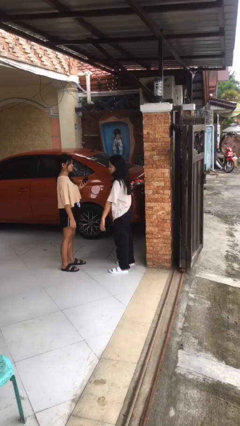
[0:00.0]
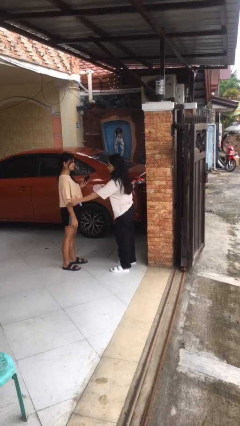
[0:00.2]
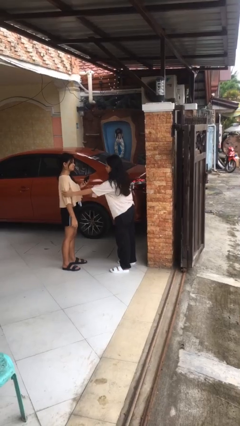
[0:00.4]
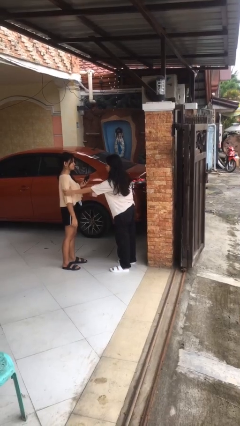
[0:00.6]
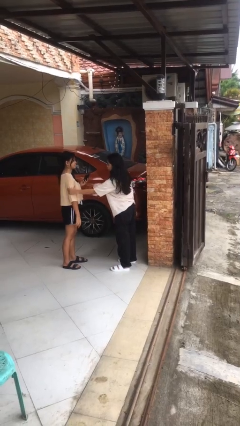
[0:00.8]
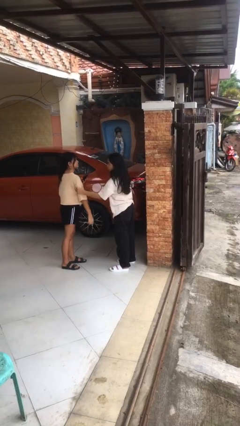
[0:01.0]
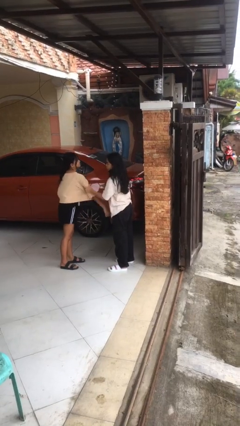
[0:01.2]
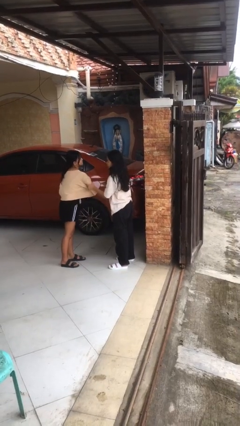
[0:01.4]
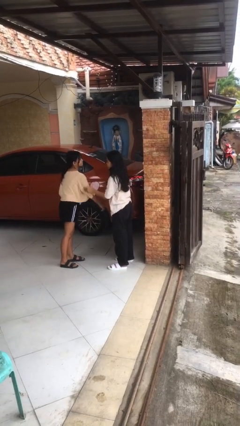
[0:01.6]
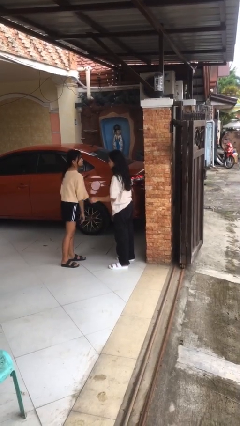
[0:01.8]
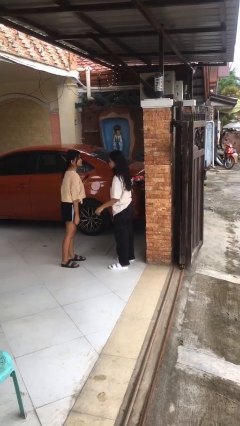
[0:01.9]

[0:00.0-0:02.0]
person grabs person by bicep

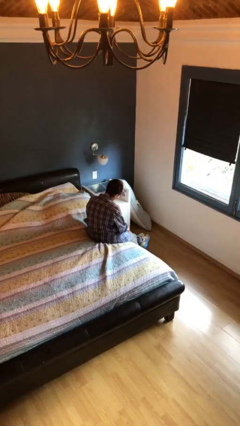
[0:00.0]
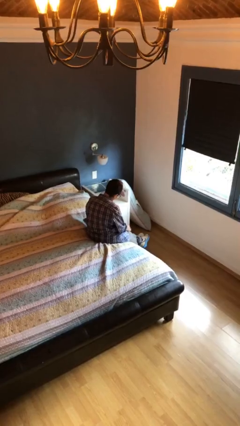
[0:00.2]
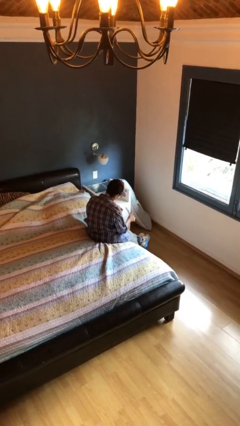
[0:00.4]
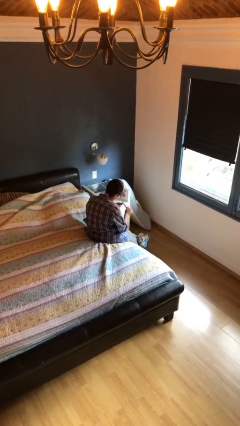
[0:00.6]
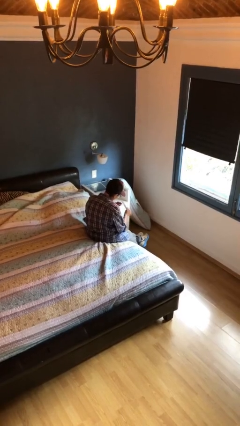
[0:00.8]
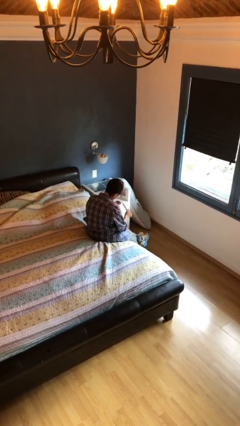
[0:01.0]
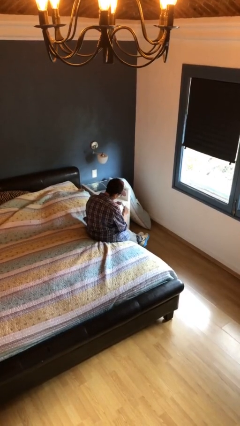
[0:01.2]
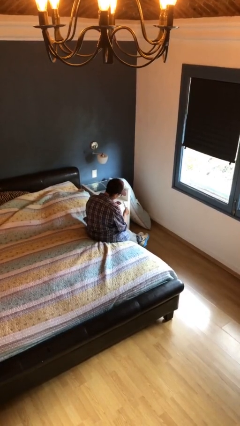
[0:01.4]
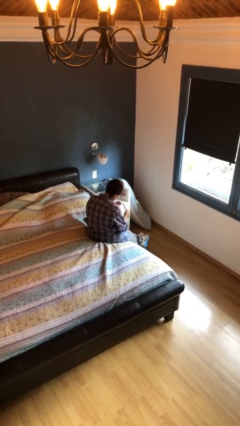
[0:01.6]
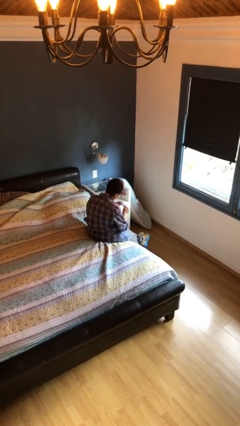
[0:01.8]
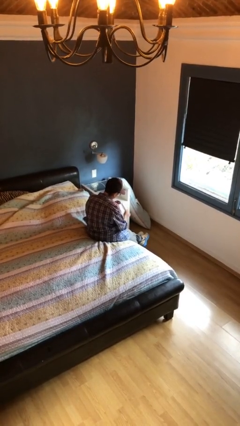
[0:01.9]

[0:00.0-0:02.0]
person files fingernails

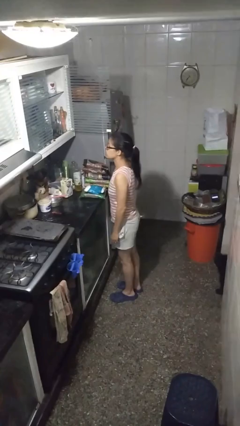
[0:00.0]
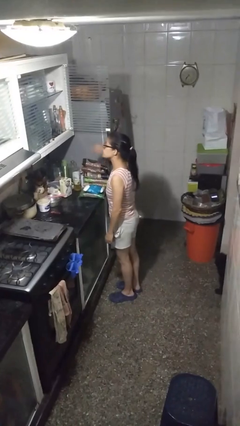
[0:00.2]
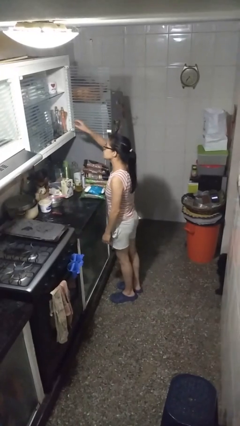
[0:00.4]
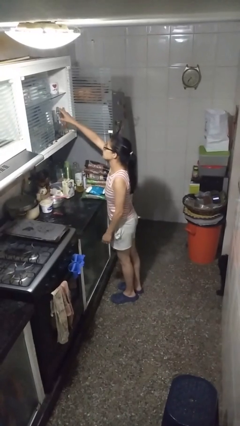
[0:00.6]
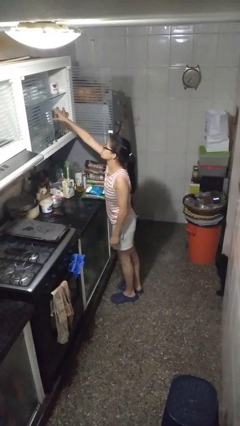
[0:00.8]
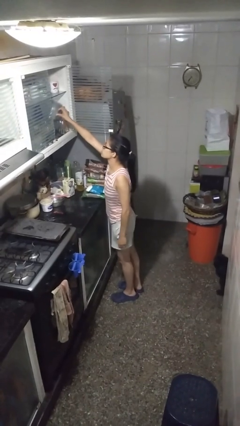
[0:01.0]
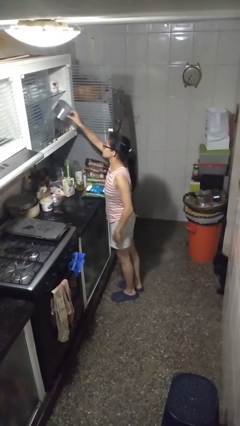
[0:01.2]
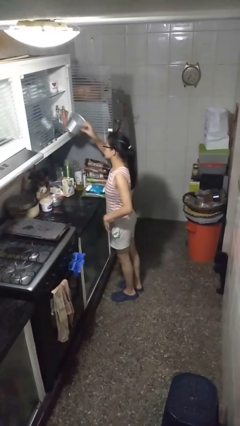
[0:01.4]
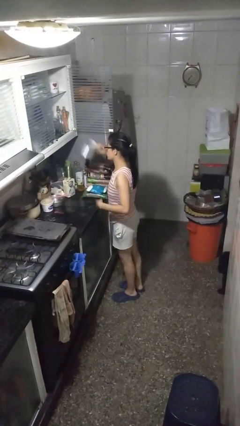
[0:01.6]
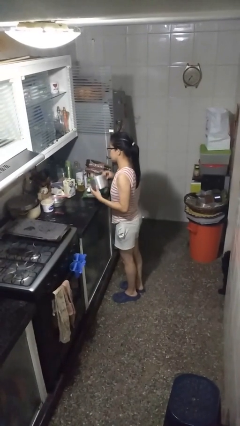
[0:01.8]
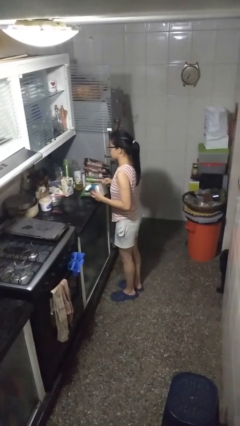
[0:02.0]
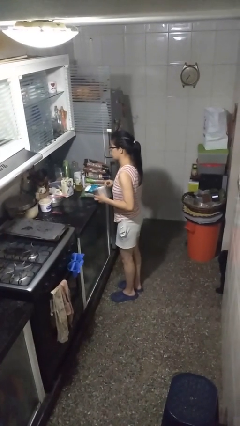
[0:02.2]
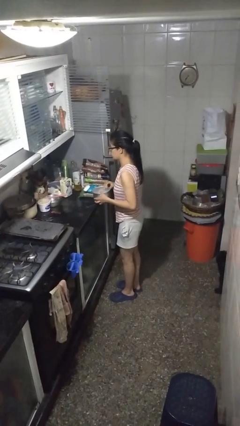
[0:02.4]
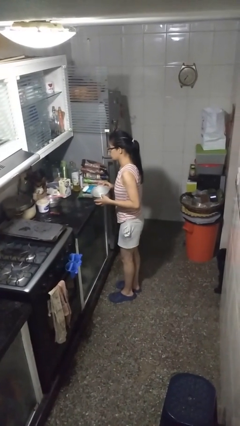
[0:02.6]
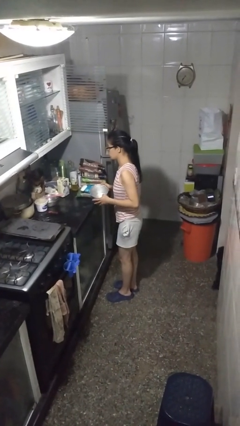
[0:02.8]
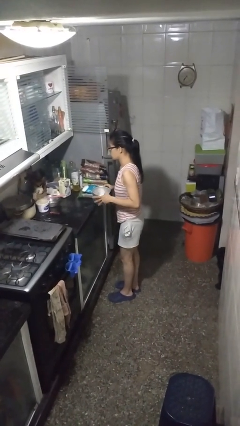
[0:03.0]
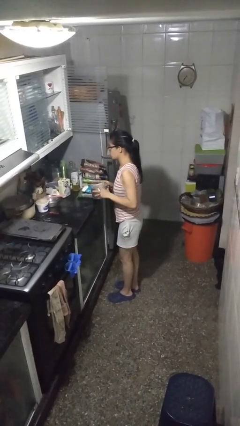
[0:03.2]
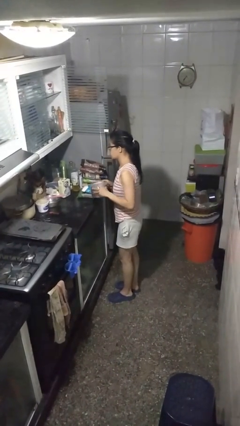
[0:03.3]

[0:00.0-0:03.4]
person picks up object from cabinet

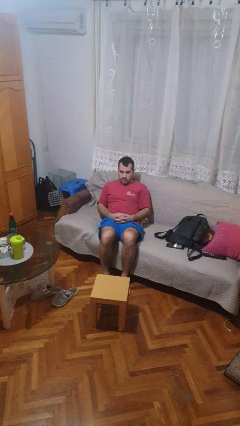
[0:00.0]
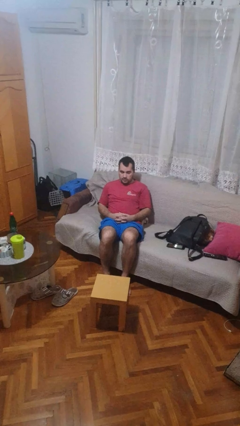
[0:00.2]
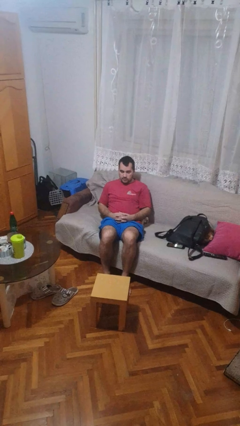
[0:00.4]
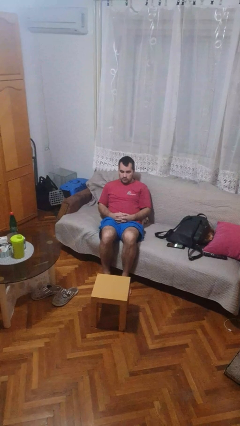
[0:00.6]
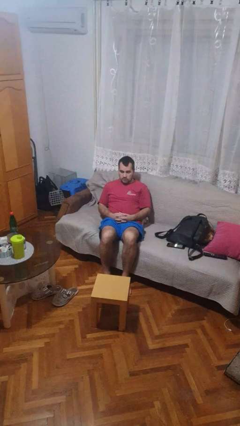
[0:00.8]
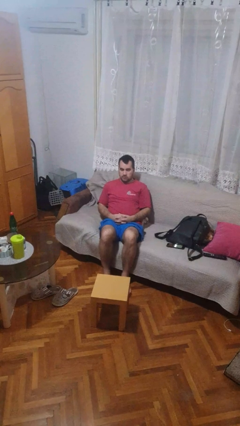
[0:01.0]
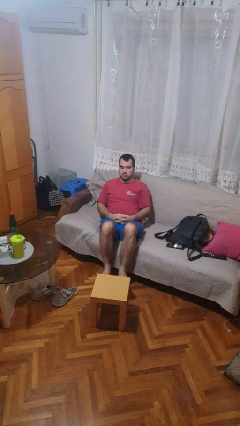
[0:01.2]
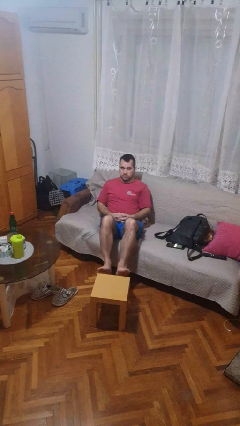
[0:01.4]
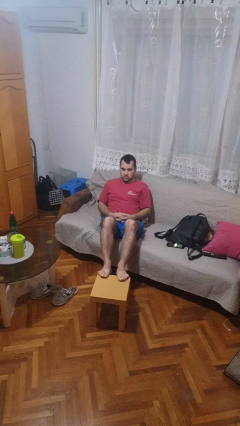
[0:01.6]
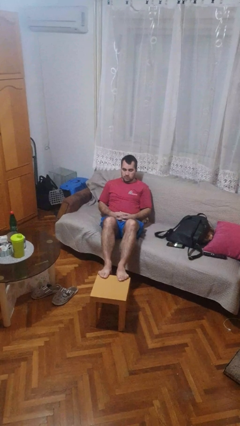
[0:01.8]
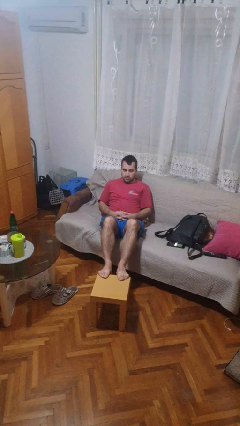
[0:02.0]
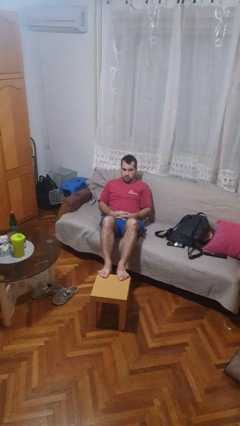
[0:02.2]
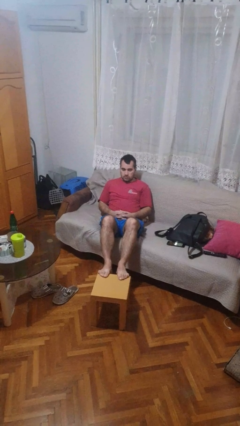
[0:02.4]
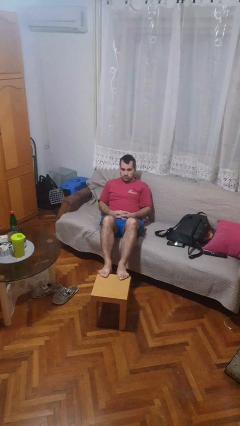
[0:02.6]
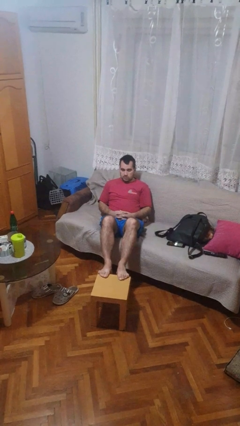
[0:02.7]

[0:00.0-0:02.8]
person puts feet up

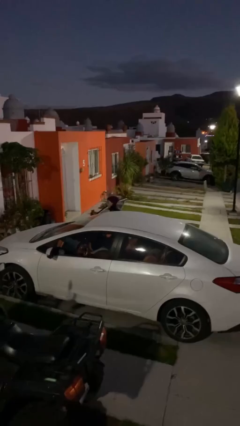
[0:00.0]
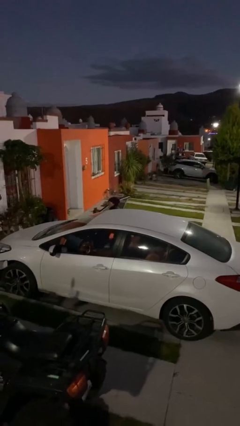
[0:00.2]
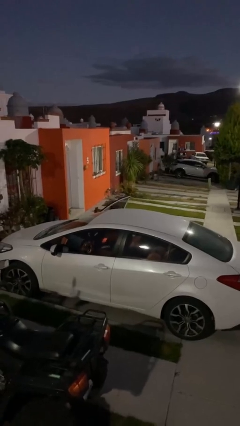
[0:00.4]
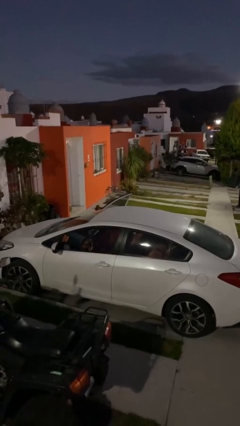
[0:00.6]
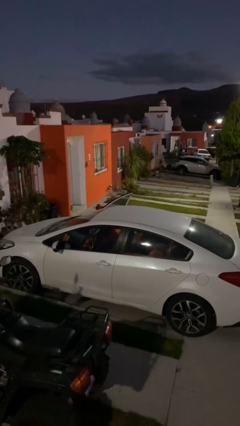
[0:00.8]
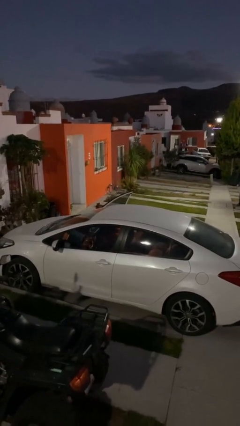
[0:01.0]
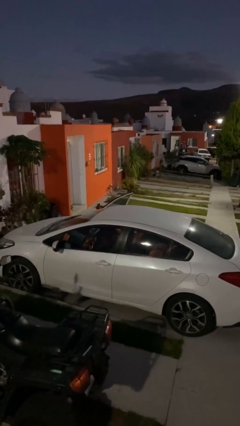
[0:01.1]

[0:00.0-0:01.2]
person enters car

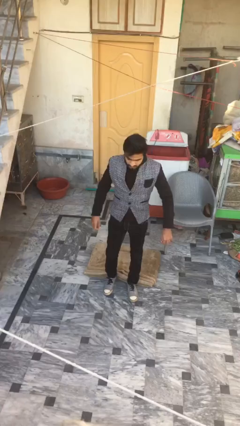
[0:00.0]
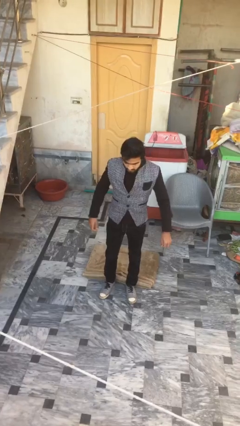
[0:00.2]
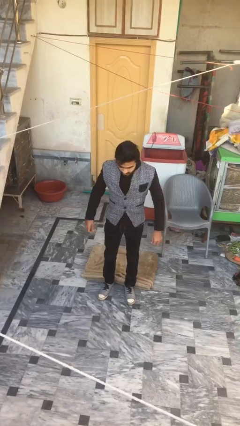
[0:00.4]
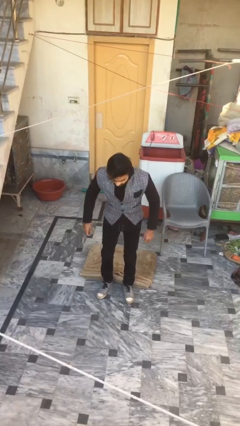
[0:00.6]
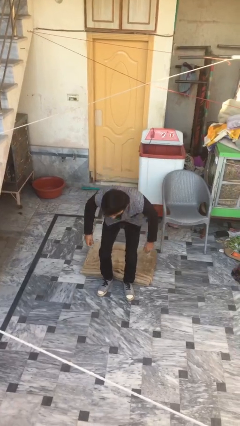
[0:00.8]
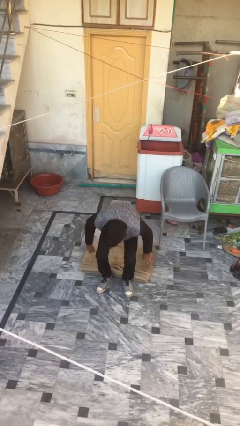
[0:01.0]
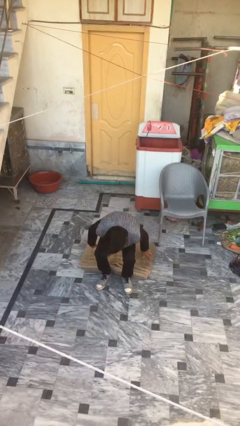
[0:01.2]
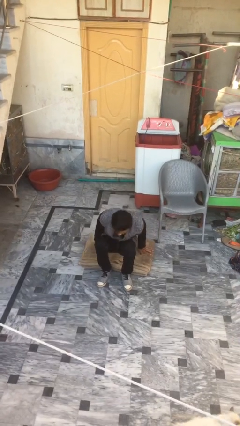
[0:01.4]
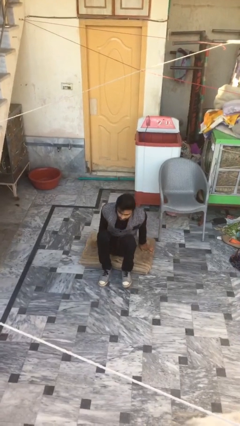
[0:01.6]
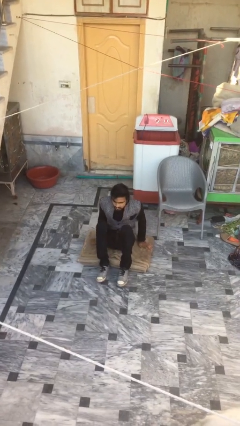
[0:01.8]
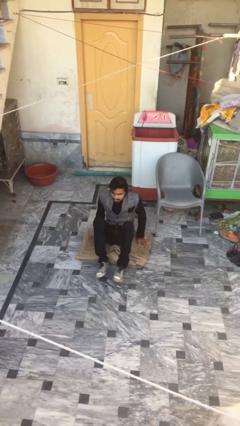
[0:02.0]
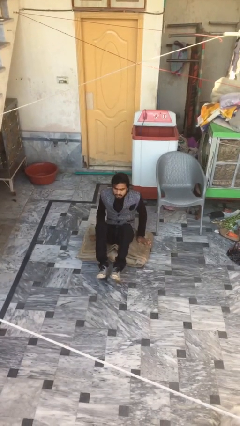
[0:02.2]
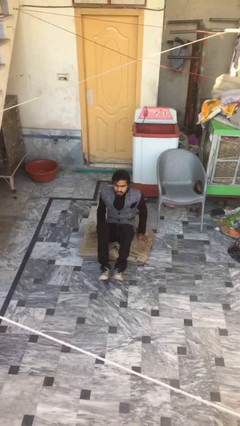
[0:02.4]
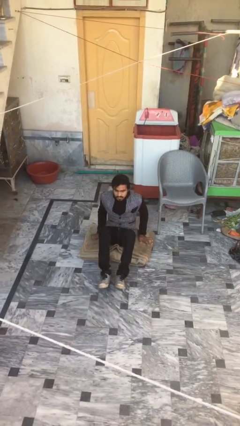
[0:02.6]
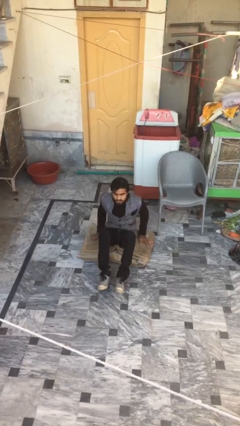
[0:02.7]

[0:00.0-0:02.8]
person sits down

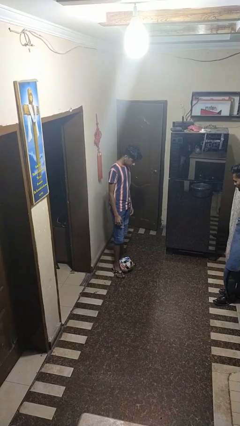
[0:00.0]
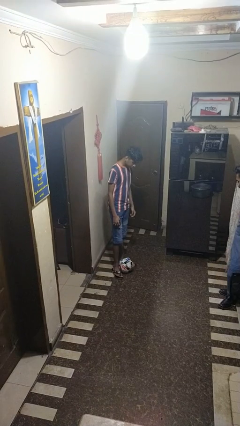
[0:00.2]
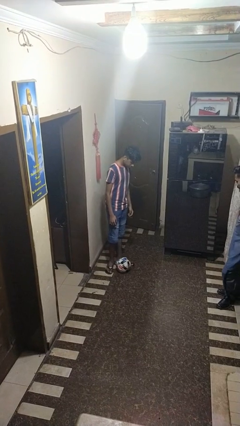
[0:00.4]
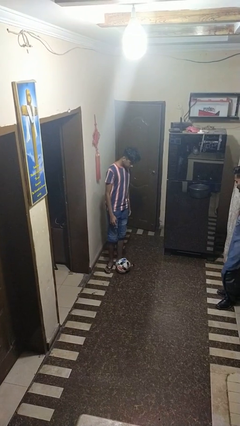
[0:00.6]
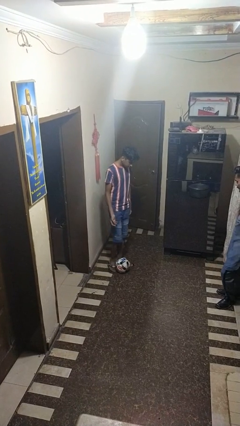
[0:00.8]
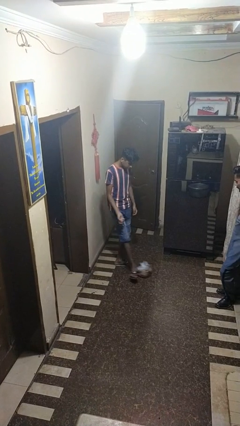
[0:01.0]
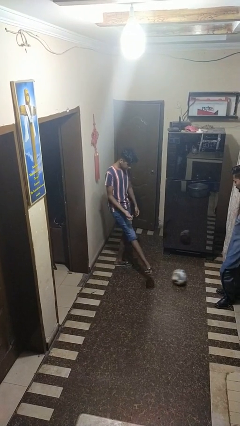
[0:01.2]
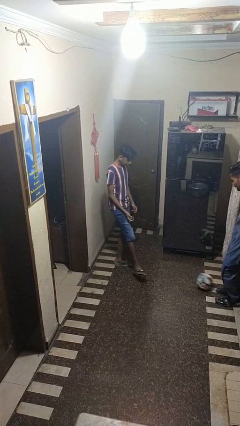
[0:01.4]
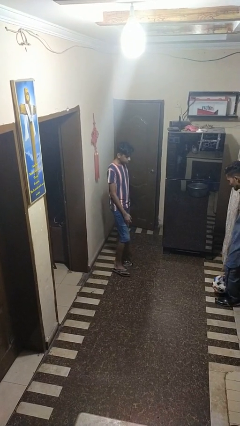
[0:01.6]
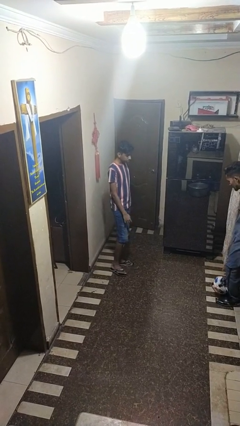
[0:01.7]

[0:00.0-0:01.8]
person kicks object to person

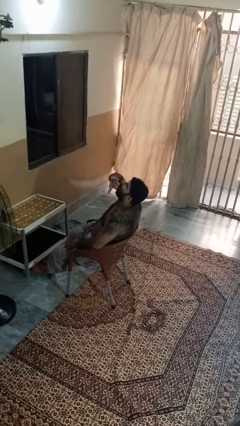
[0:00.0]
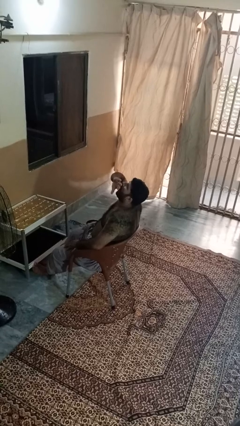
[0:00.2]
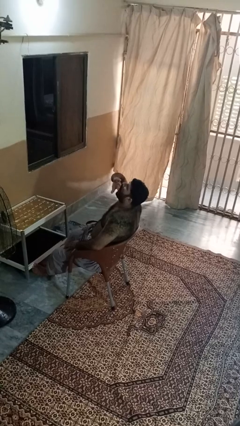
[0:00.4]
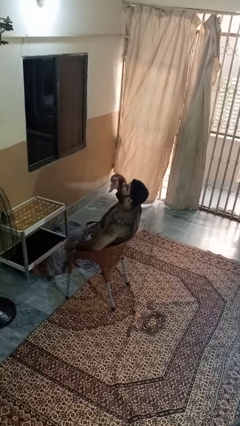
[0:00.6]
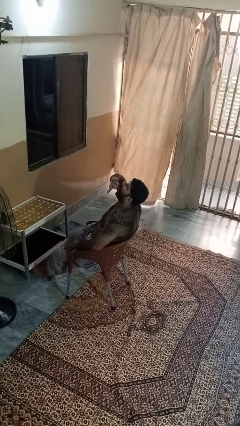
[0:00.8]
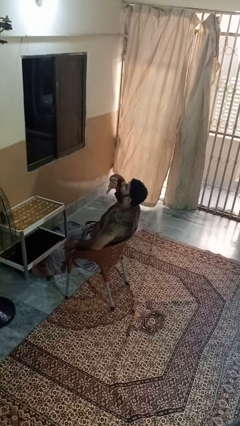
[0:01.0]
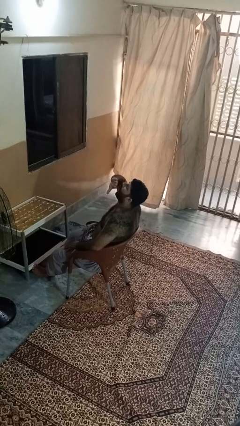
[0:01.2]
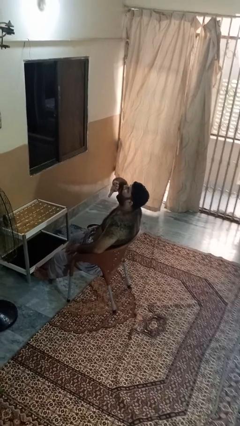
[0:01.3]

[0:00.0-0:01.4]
person yawns
